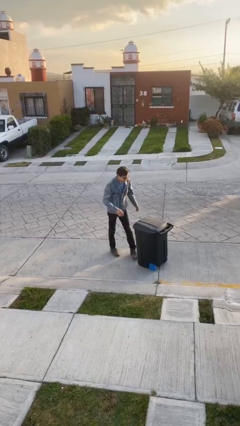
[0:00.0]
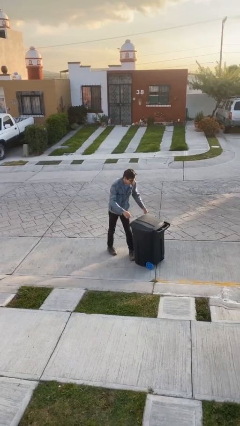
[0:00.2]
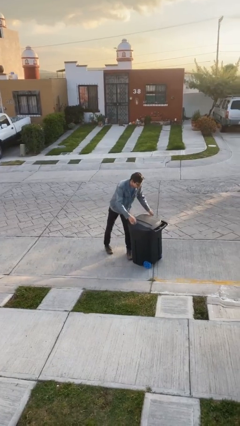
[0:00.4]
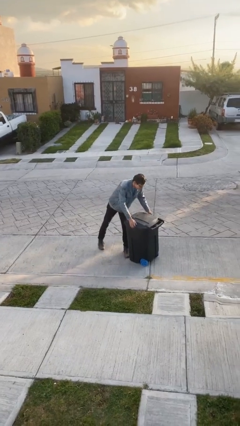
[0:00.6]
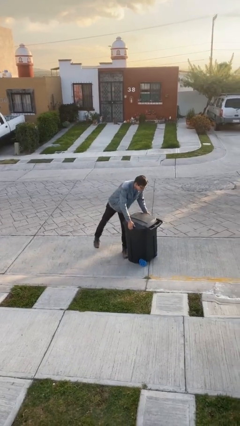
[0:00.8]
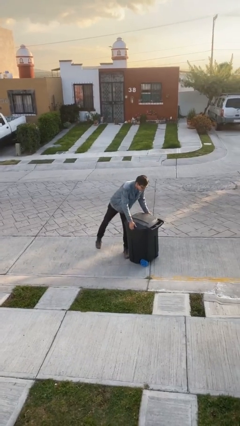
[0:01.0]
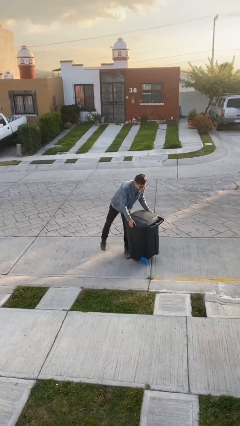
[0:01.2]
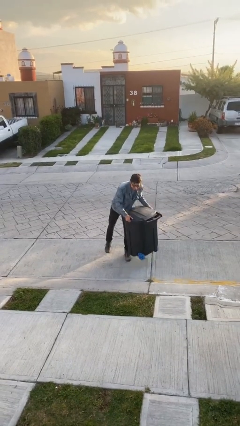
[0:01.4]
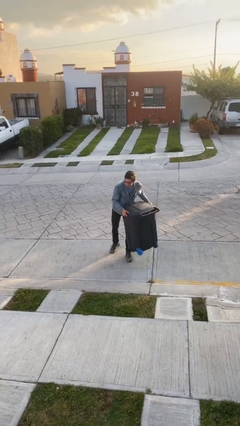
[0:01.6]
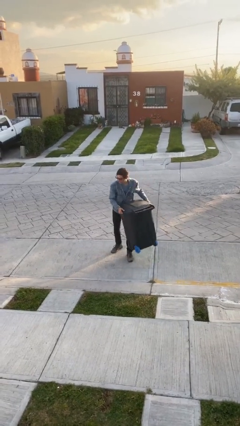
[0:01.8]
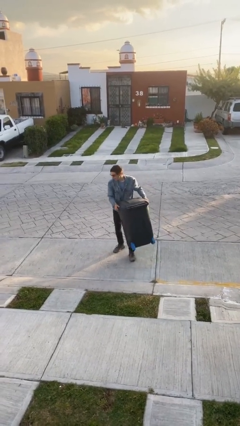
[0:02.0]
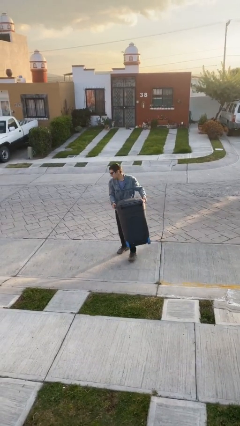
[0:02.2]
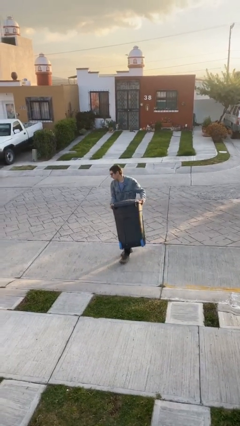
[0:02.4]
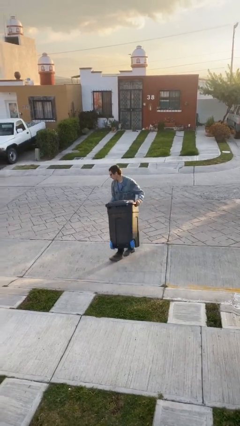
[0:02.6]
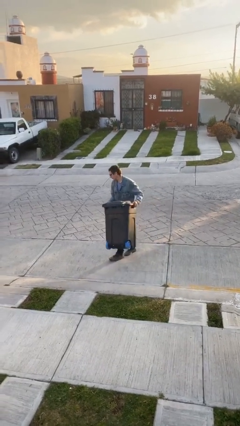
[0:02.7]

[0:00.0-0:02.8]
person picks up object from floor

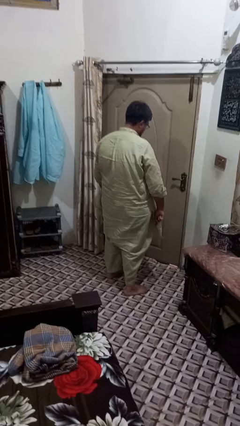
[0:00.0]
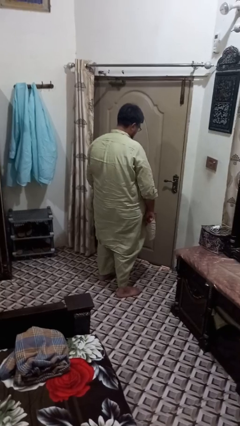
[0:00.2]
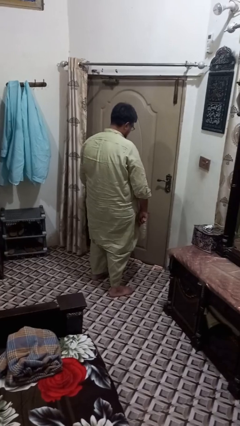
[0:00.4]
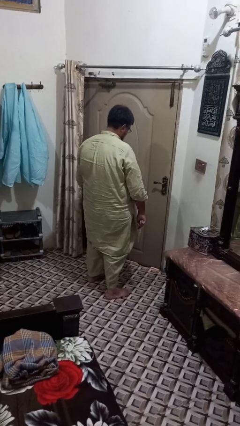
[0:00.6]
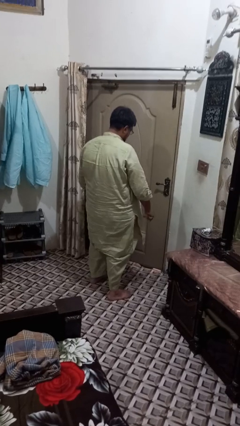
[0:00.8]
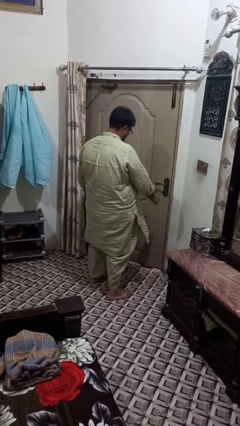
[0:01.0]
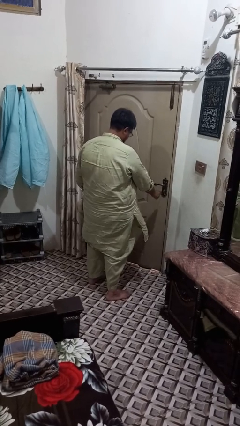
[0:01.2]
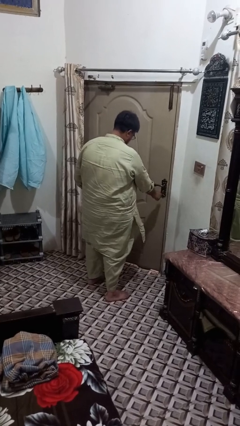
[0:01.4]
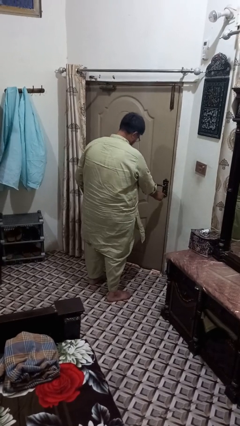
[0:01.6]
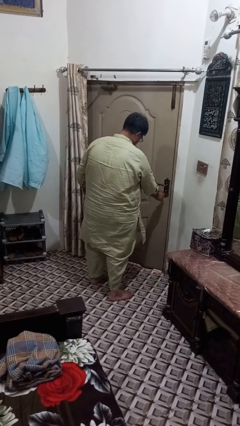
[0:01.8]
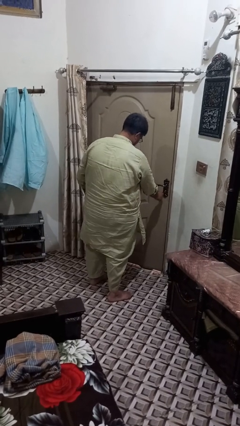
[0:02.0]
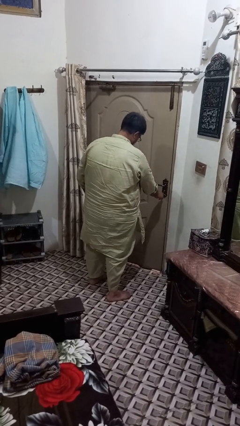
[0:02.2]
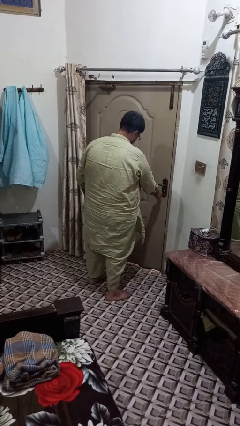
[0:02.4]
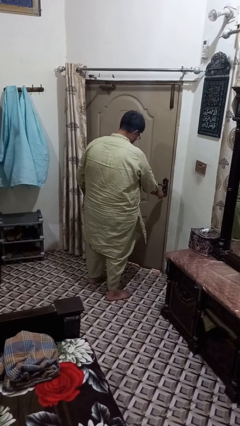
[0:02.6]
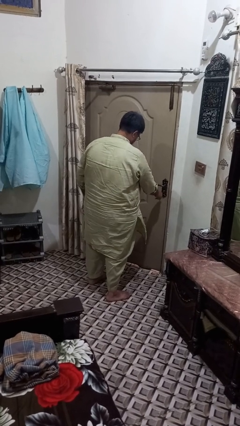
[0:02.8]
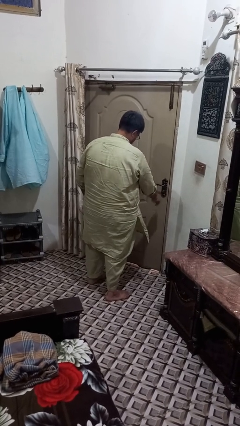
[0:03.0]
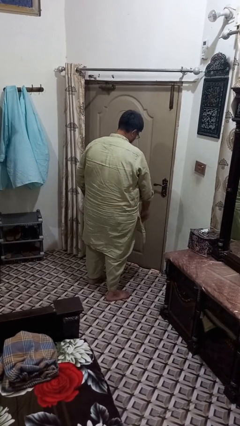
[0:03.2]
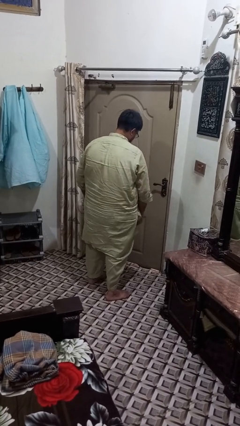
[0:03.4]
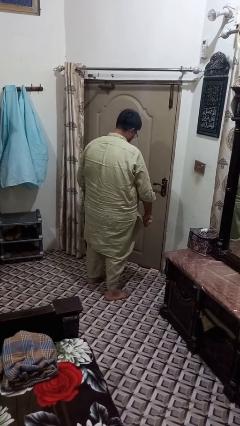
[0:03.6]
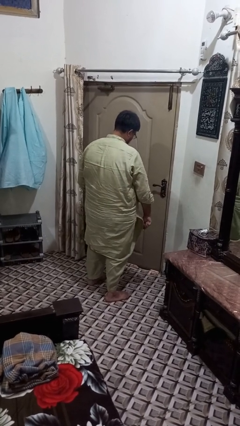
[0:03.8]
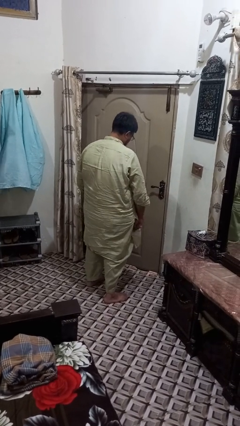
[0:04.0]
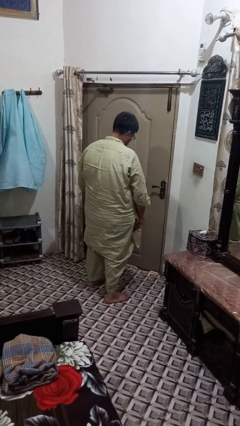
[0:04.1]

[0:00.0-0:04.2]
person unlocks door with keys

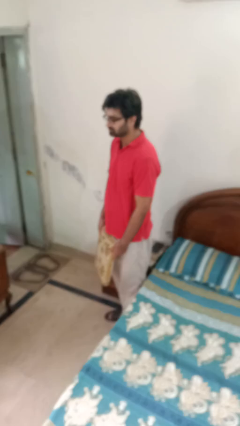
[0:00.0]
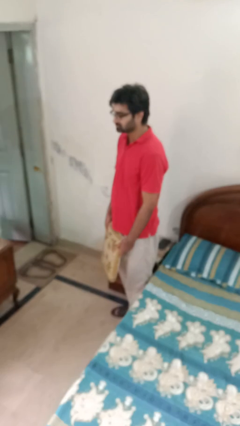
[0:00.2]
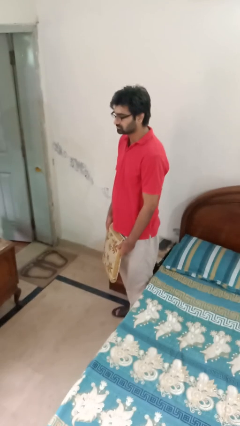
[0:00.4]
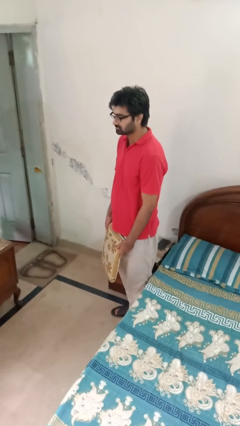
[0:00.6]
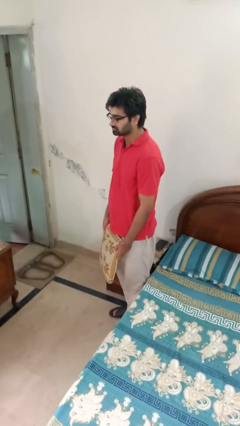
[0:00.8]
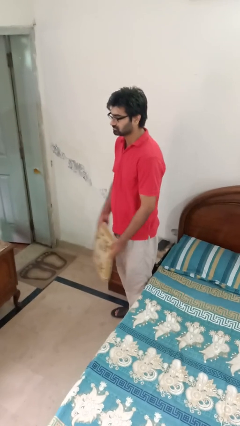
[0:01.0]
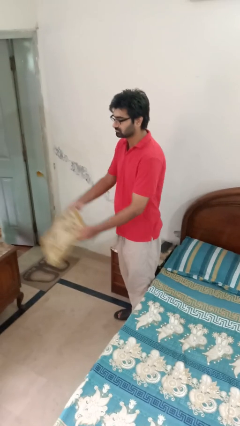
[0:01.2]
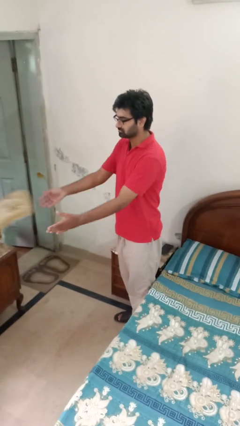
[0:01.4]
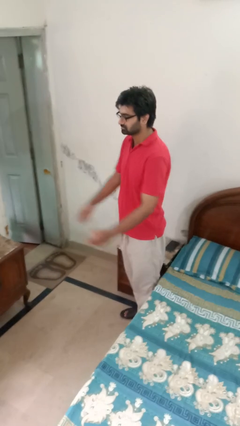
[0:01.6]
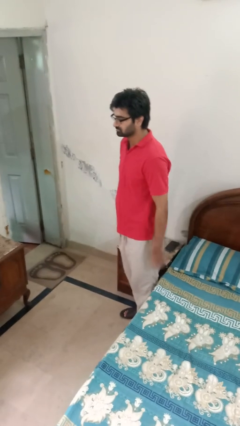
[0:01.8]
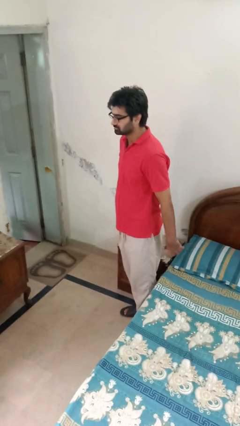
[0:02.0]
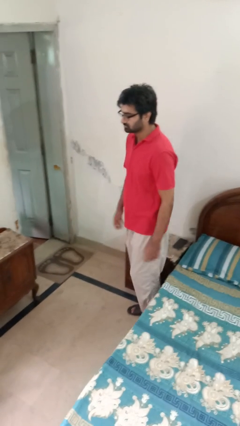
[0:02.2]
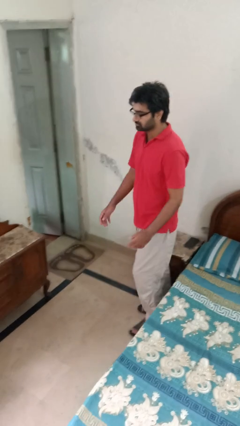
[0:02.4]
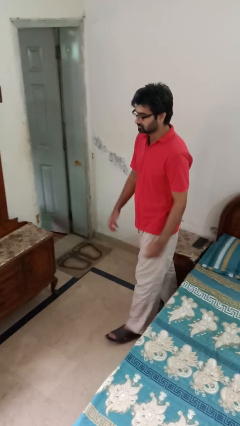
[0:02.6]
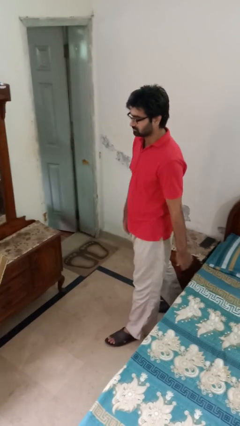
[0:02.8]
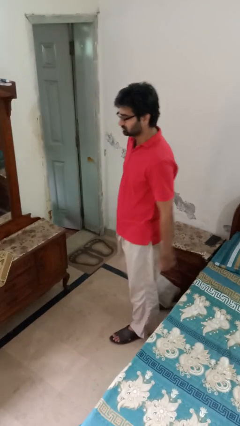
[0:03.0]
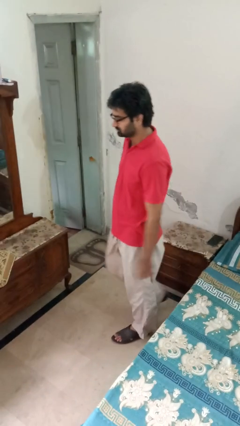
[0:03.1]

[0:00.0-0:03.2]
person throws object on table

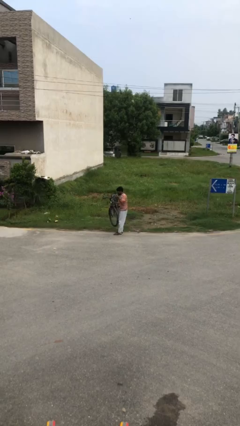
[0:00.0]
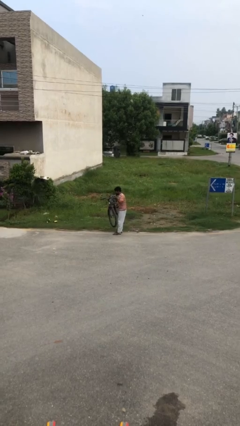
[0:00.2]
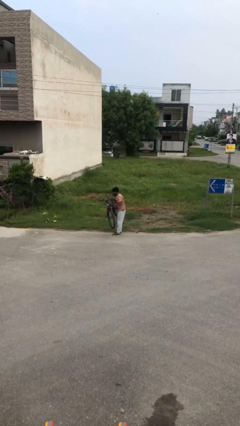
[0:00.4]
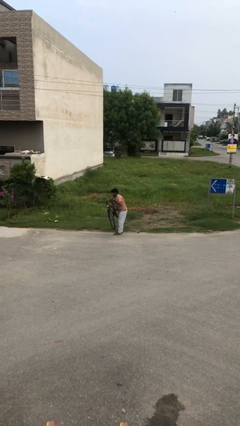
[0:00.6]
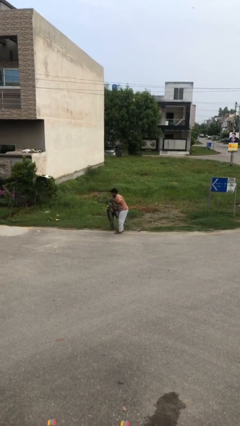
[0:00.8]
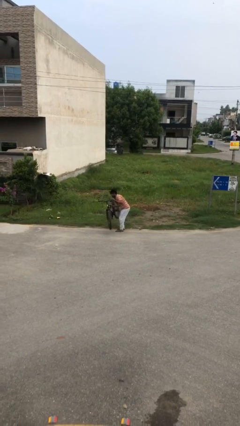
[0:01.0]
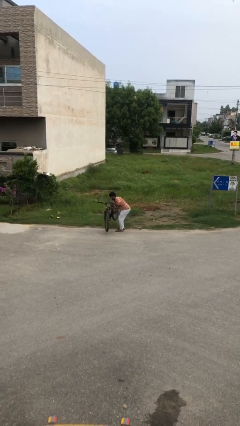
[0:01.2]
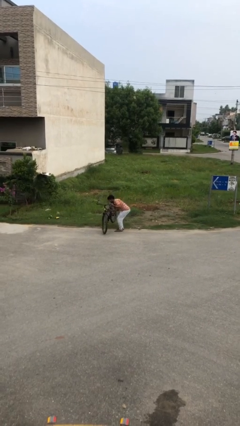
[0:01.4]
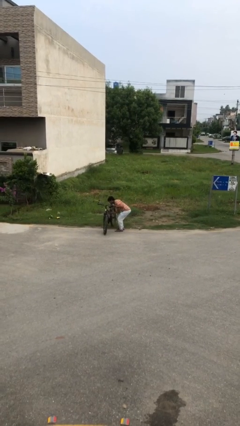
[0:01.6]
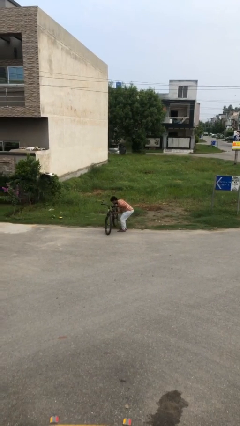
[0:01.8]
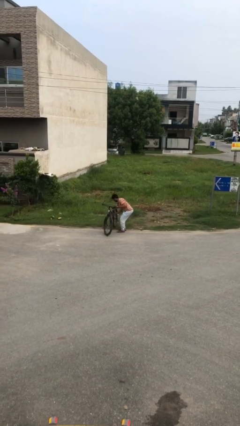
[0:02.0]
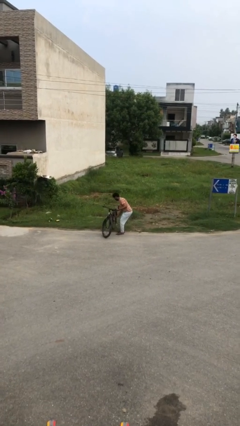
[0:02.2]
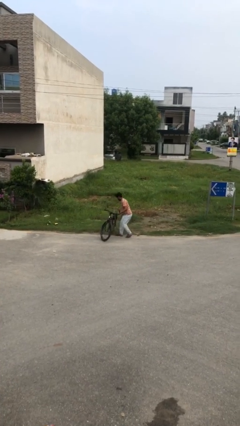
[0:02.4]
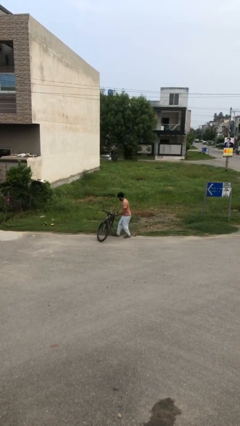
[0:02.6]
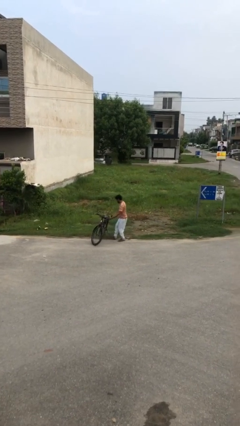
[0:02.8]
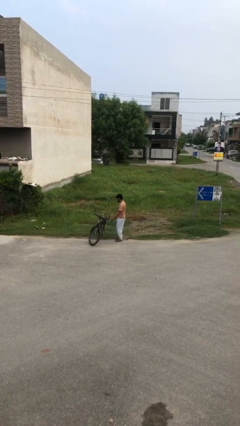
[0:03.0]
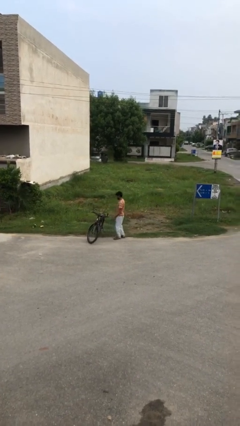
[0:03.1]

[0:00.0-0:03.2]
person puts down object on floor

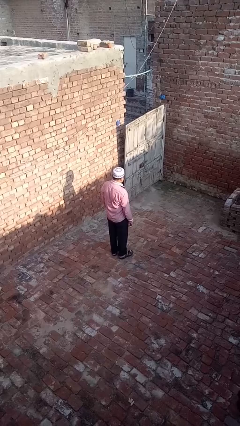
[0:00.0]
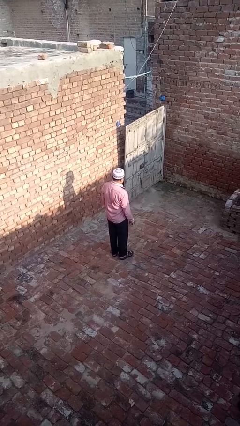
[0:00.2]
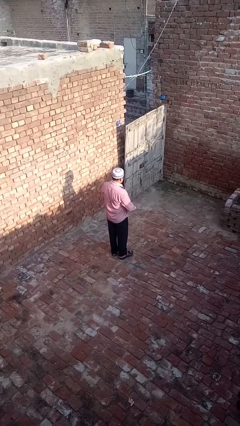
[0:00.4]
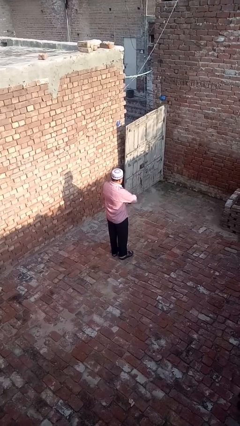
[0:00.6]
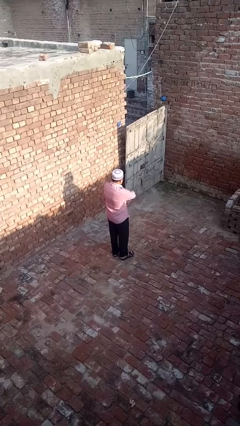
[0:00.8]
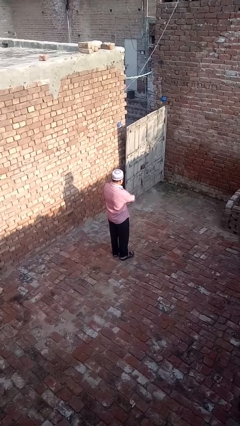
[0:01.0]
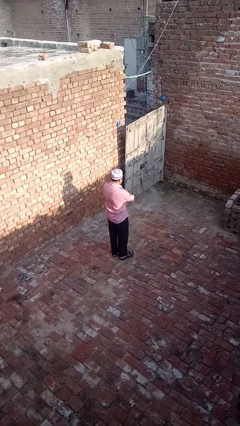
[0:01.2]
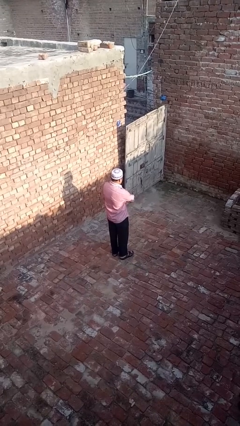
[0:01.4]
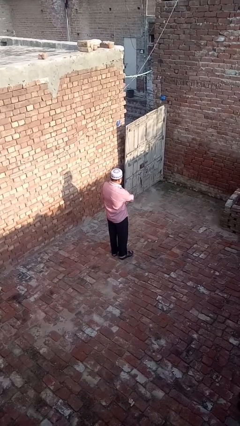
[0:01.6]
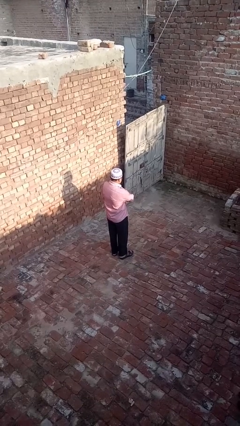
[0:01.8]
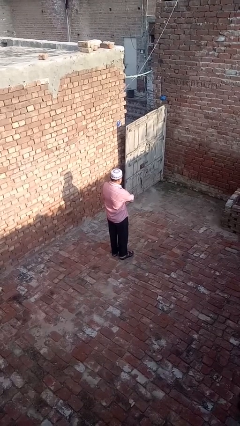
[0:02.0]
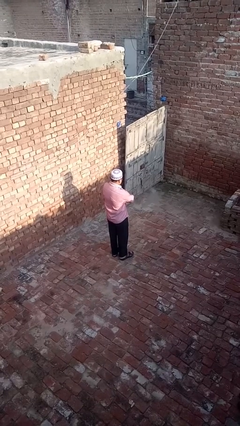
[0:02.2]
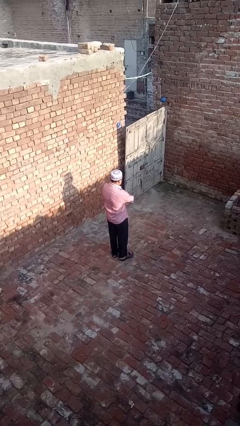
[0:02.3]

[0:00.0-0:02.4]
person crosses arms

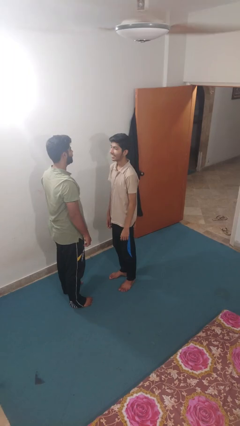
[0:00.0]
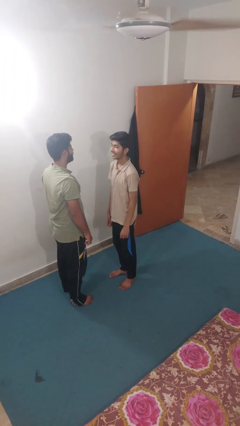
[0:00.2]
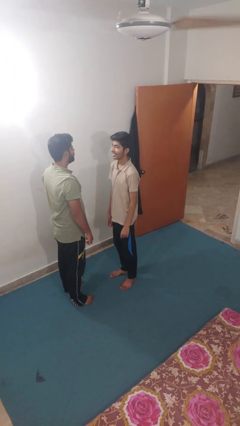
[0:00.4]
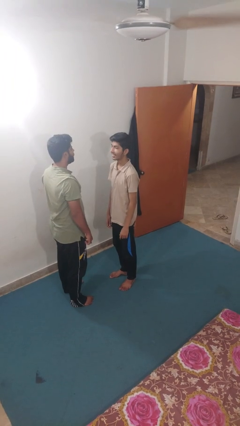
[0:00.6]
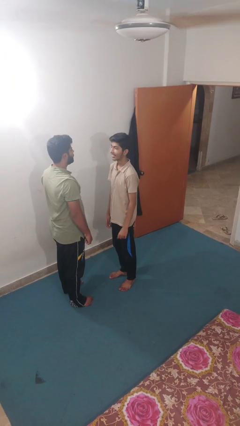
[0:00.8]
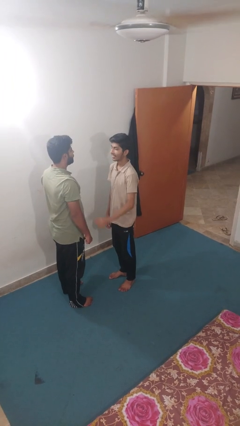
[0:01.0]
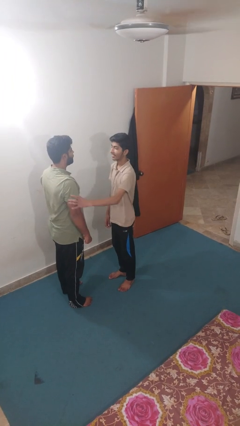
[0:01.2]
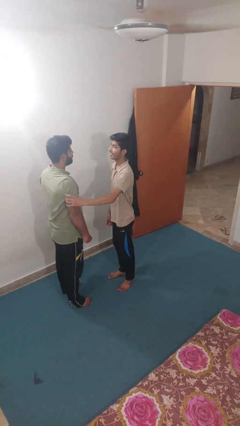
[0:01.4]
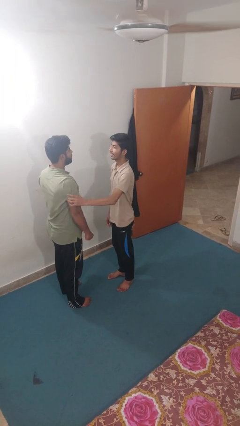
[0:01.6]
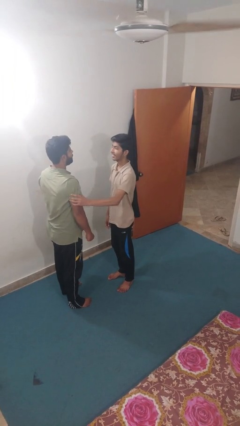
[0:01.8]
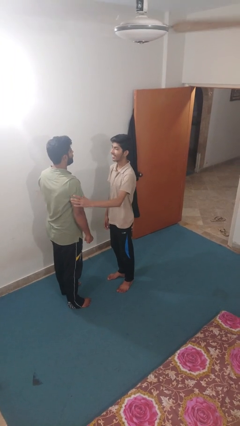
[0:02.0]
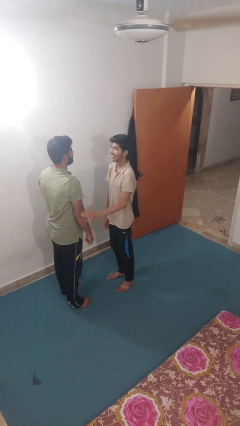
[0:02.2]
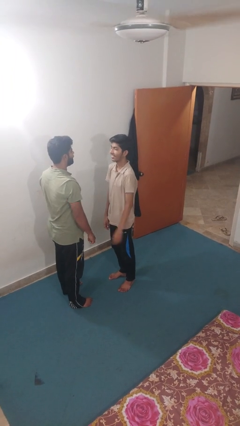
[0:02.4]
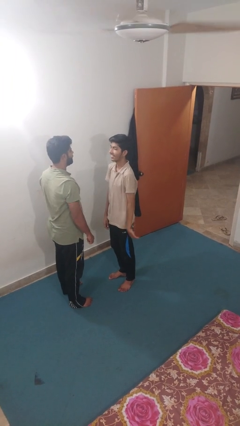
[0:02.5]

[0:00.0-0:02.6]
person grabs person by bicep
